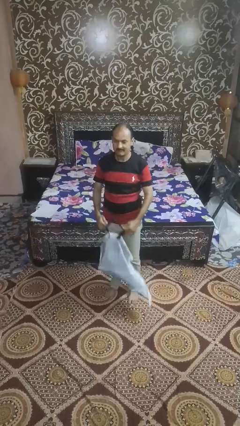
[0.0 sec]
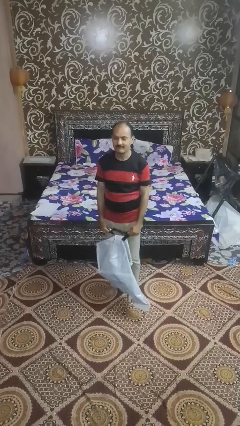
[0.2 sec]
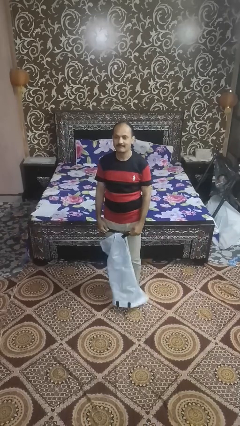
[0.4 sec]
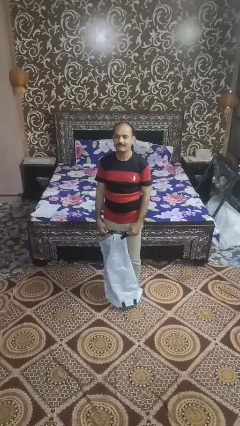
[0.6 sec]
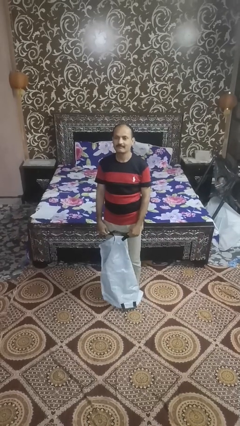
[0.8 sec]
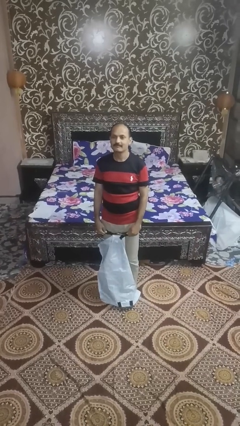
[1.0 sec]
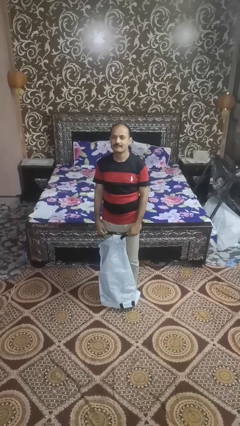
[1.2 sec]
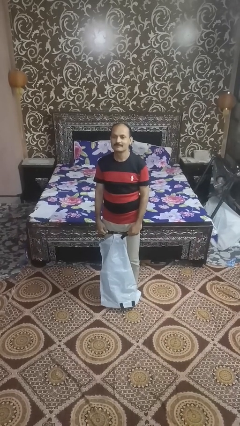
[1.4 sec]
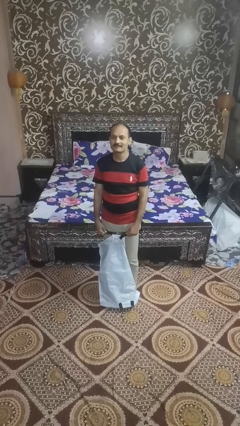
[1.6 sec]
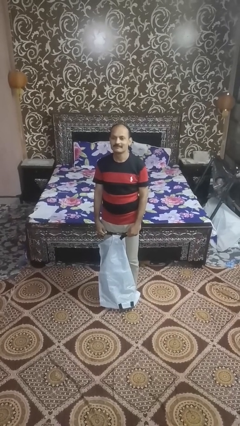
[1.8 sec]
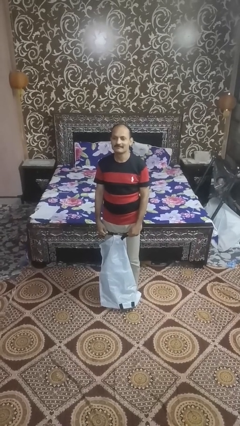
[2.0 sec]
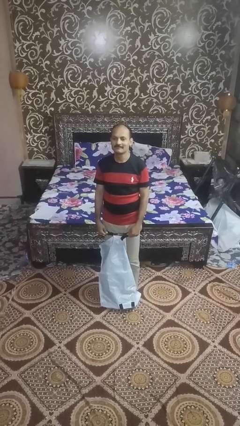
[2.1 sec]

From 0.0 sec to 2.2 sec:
person tears paper

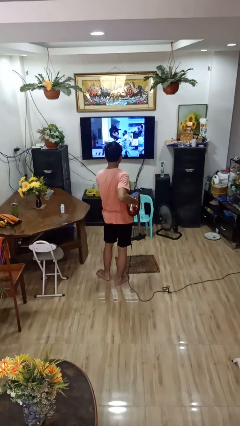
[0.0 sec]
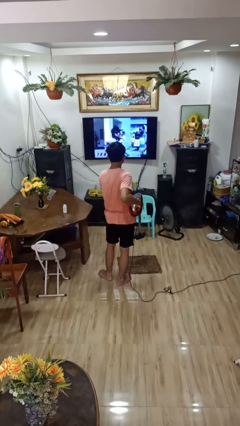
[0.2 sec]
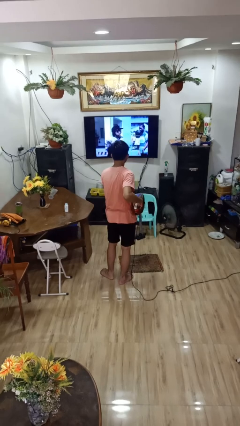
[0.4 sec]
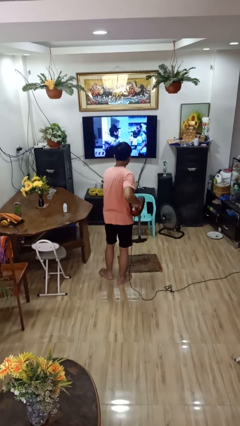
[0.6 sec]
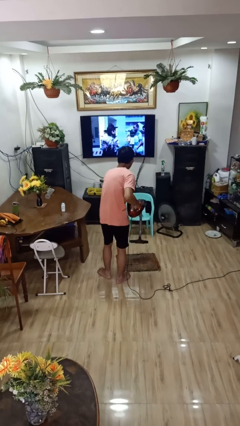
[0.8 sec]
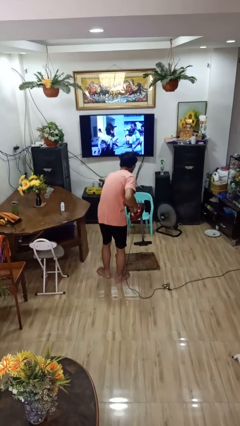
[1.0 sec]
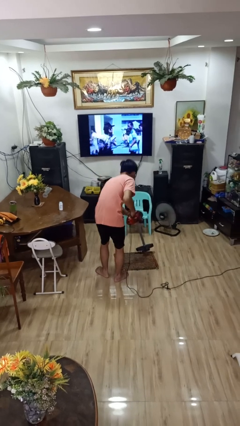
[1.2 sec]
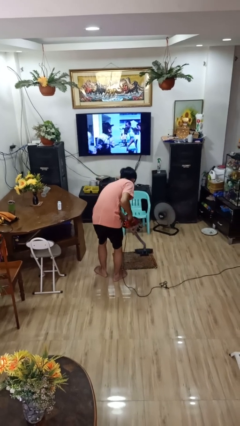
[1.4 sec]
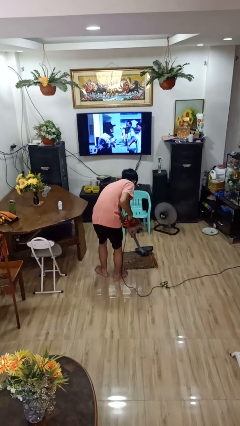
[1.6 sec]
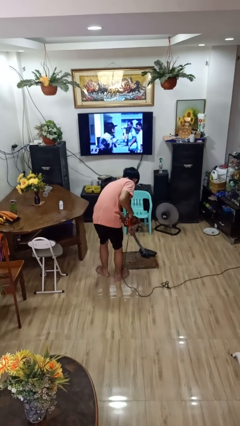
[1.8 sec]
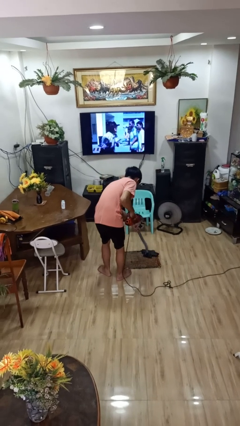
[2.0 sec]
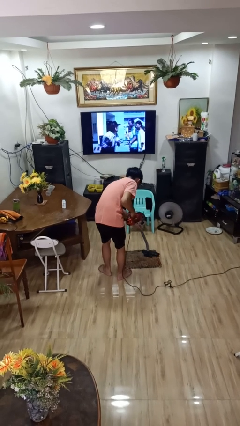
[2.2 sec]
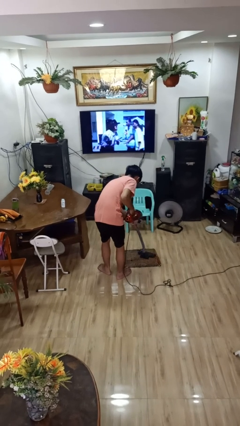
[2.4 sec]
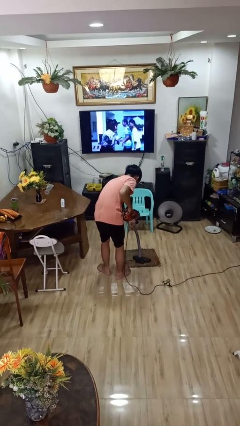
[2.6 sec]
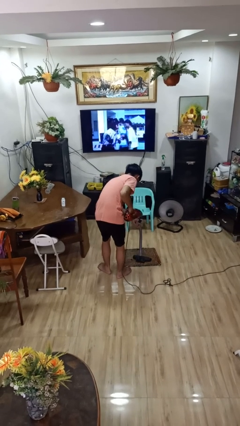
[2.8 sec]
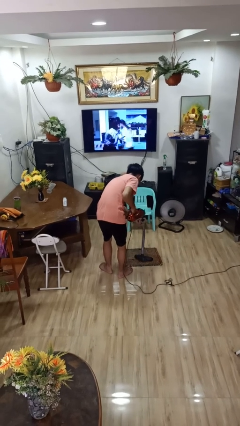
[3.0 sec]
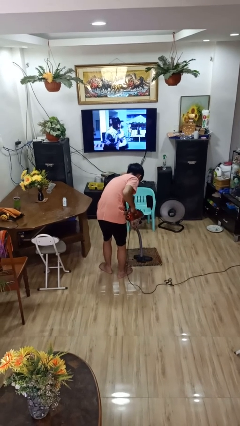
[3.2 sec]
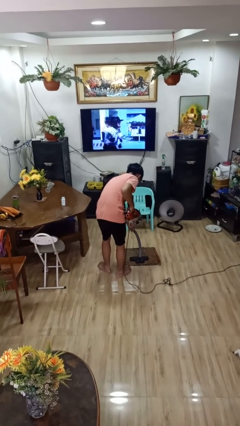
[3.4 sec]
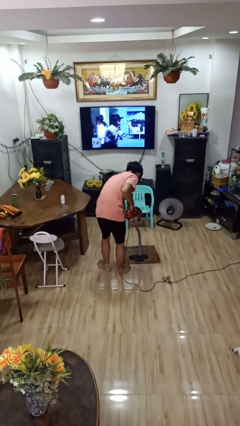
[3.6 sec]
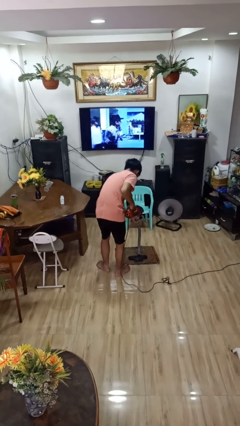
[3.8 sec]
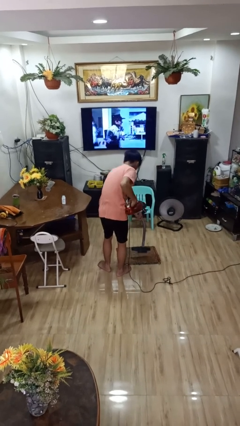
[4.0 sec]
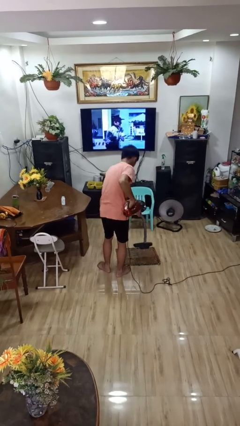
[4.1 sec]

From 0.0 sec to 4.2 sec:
person vacuums carpet

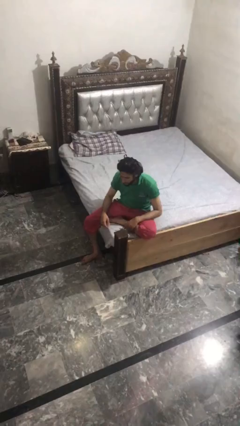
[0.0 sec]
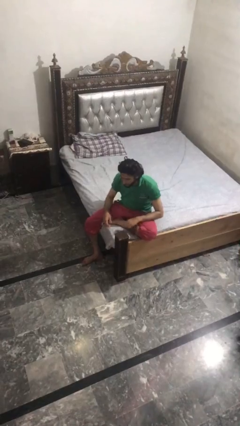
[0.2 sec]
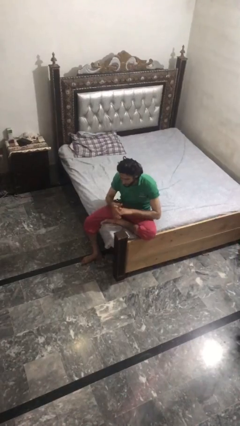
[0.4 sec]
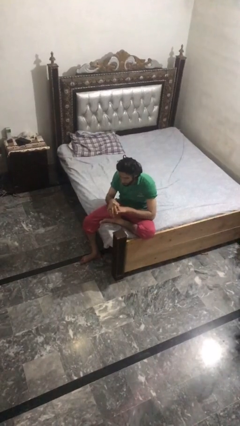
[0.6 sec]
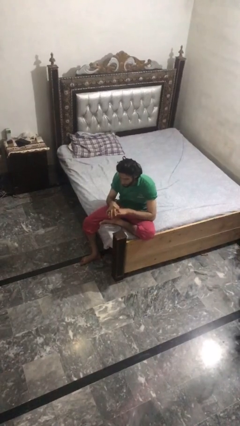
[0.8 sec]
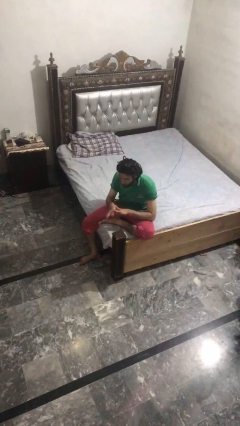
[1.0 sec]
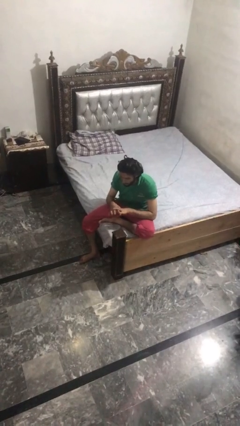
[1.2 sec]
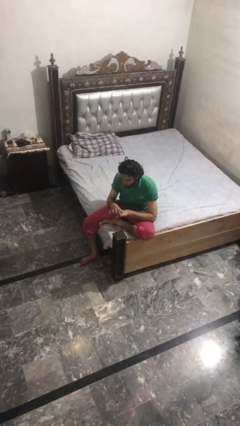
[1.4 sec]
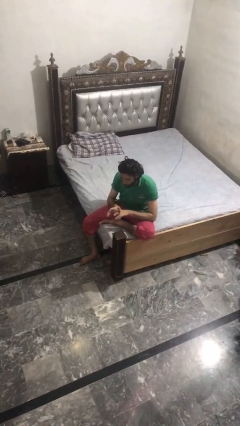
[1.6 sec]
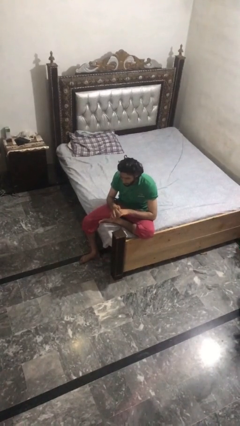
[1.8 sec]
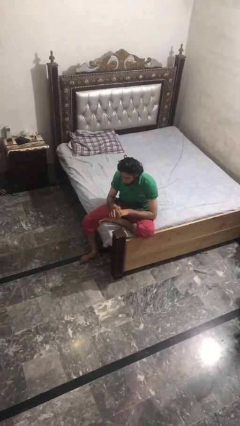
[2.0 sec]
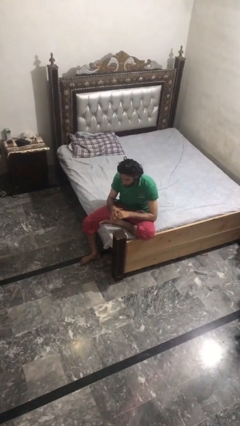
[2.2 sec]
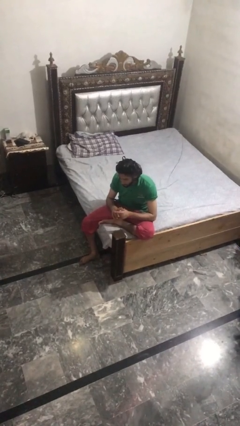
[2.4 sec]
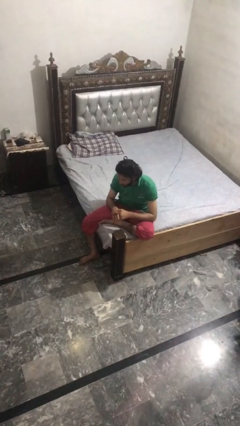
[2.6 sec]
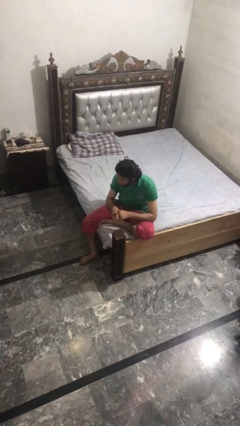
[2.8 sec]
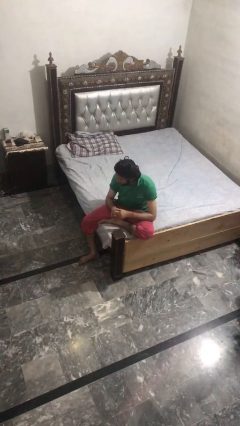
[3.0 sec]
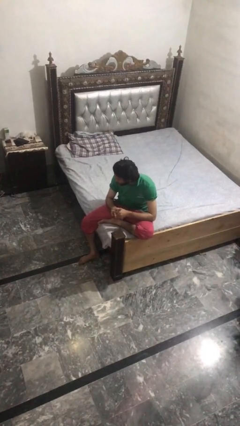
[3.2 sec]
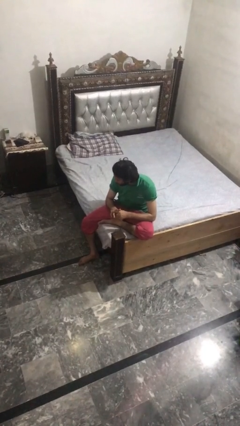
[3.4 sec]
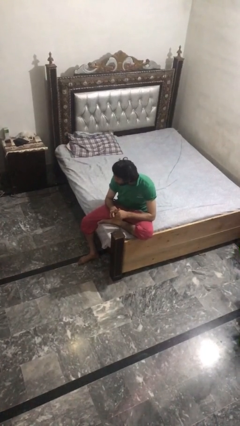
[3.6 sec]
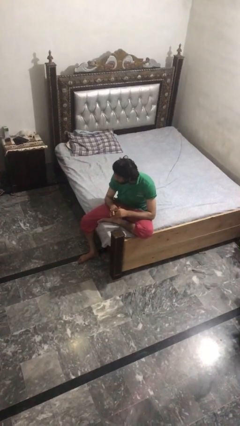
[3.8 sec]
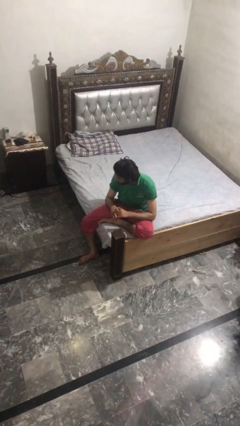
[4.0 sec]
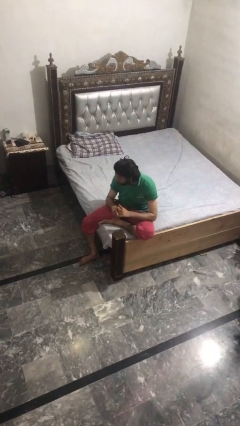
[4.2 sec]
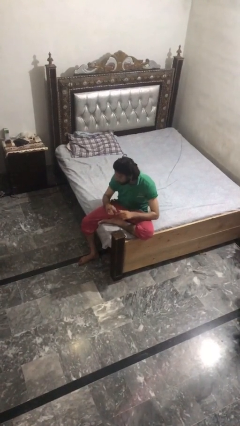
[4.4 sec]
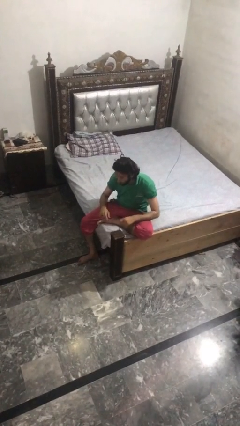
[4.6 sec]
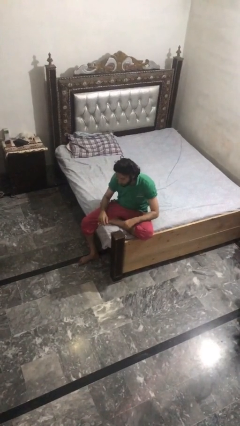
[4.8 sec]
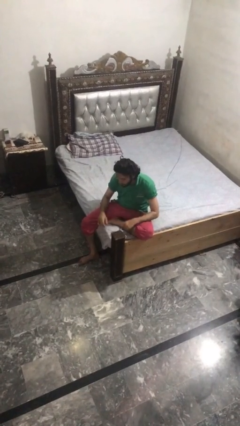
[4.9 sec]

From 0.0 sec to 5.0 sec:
person cracks knuckles

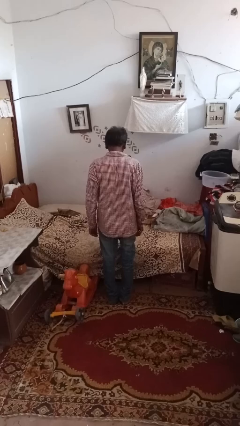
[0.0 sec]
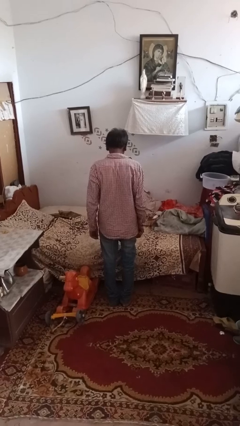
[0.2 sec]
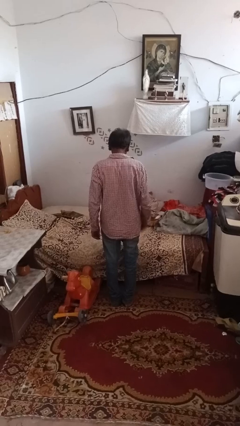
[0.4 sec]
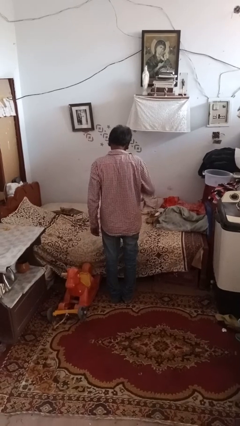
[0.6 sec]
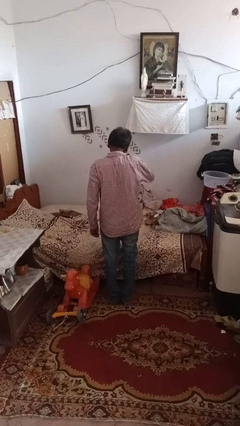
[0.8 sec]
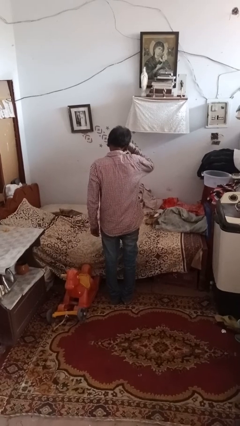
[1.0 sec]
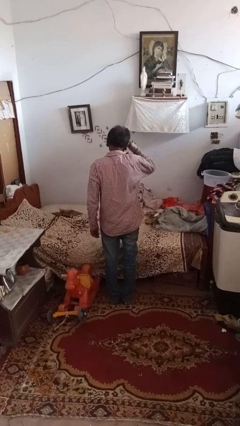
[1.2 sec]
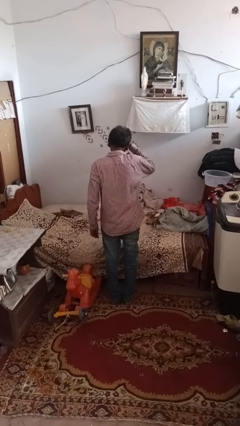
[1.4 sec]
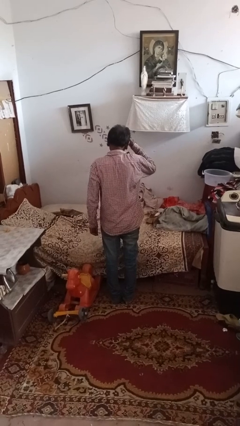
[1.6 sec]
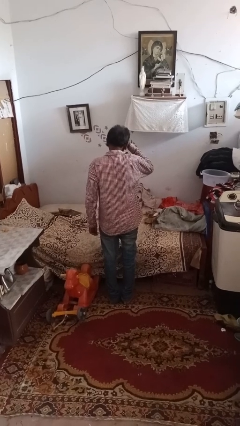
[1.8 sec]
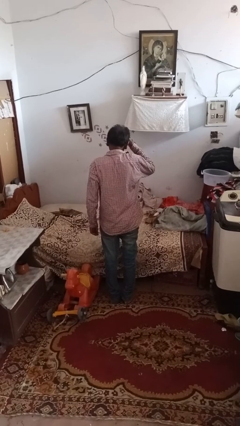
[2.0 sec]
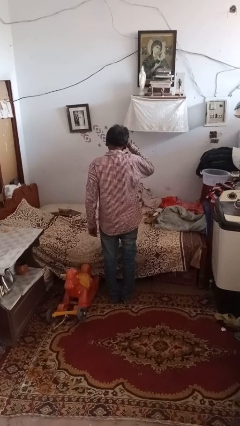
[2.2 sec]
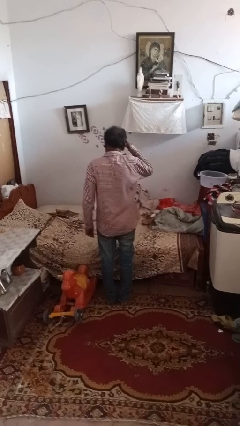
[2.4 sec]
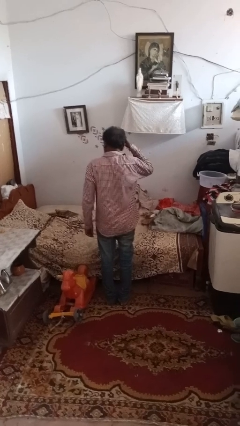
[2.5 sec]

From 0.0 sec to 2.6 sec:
person shades eyes

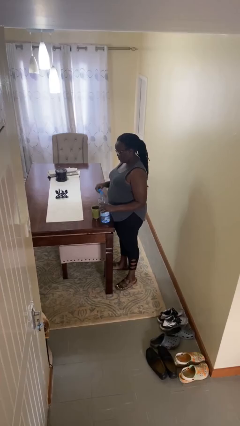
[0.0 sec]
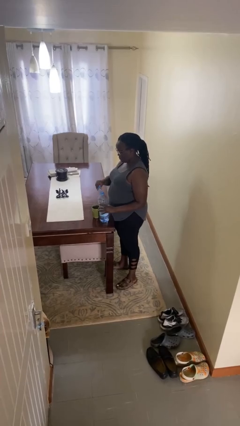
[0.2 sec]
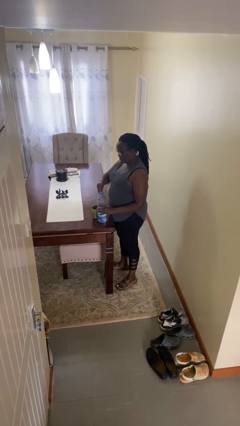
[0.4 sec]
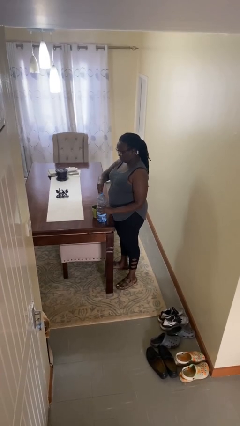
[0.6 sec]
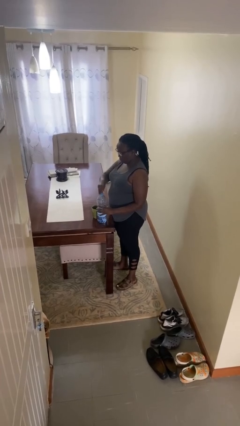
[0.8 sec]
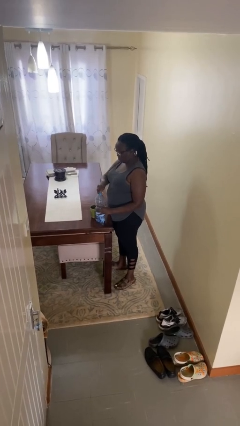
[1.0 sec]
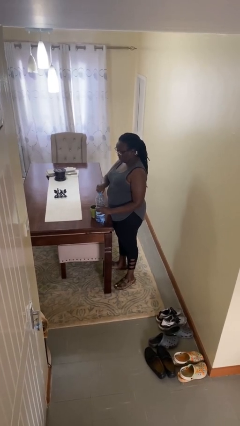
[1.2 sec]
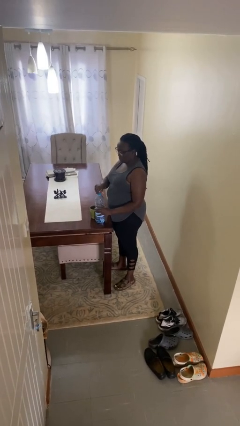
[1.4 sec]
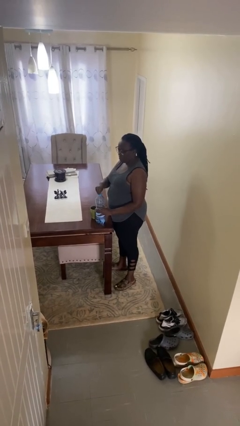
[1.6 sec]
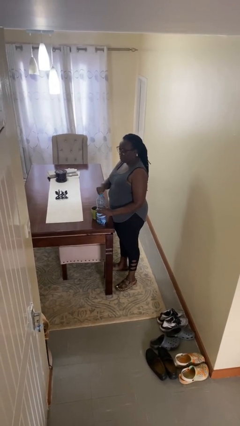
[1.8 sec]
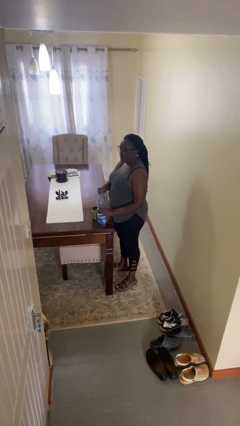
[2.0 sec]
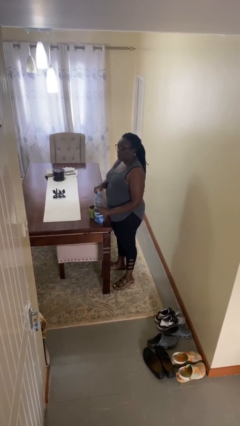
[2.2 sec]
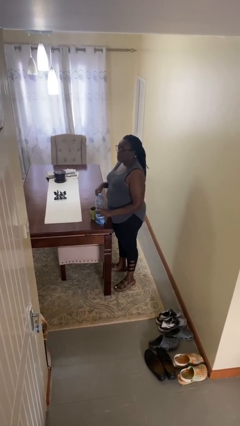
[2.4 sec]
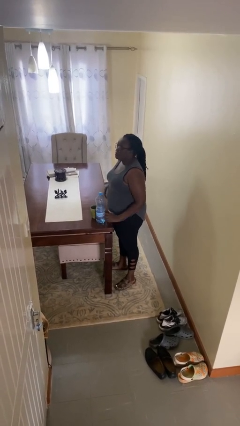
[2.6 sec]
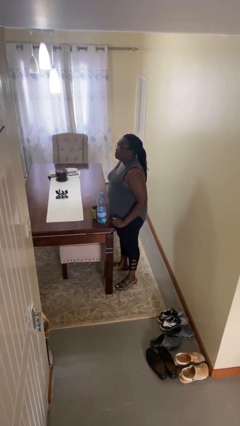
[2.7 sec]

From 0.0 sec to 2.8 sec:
person screws lid to bottle

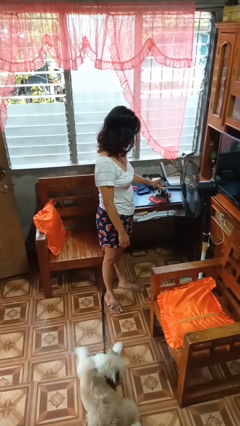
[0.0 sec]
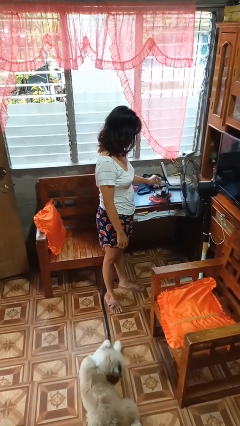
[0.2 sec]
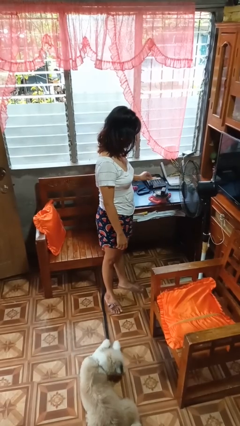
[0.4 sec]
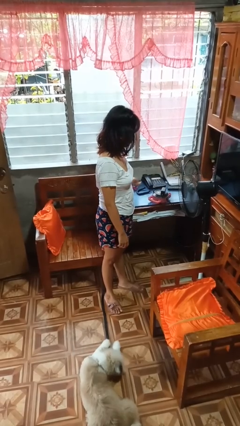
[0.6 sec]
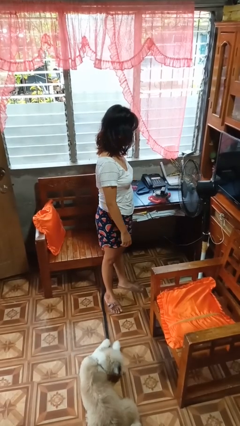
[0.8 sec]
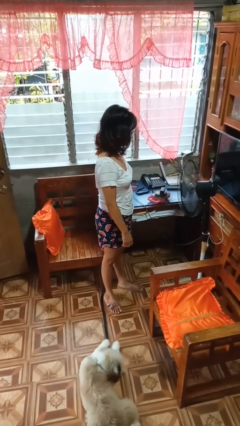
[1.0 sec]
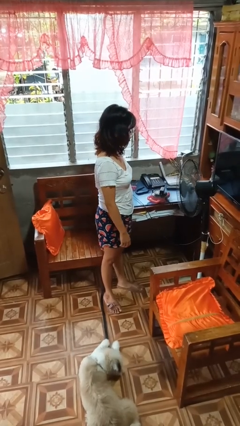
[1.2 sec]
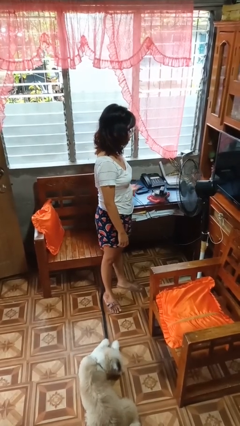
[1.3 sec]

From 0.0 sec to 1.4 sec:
person unplugs from electrical socket
